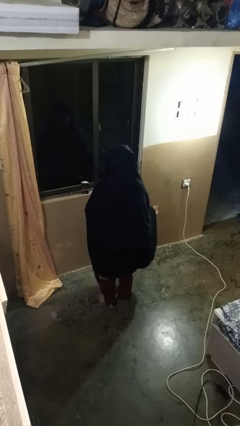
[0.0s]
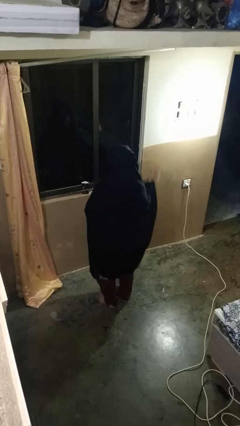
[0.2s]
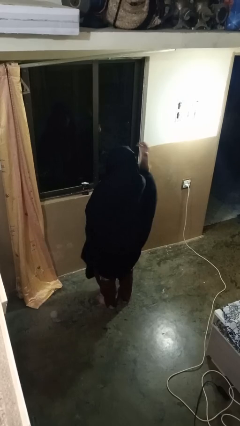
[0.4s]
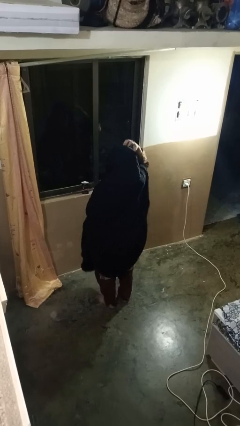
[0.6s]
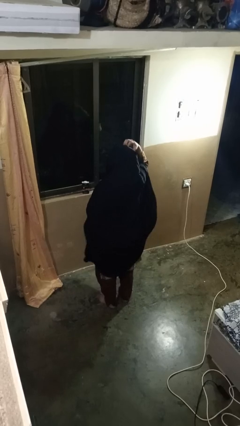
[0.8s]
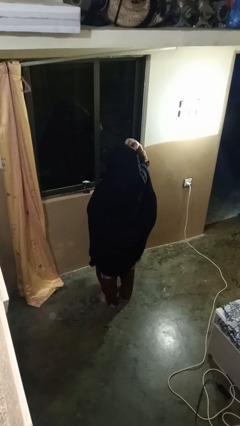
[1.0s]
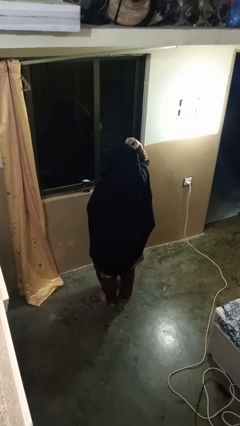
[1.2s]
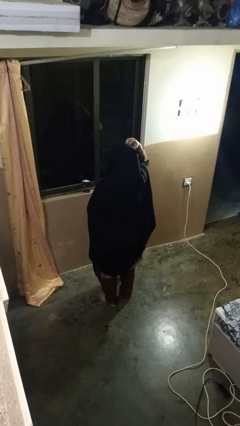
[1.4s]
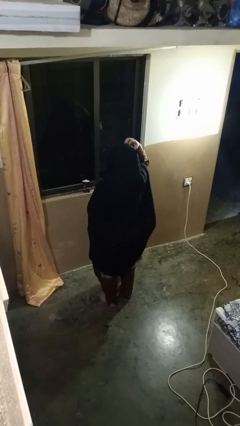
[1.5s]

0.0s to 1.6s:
person scratches face

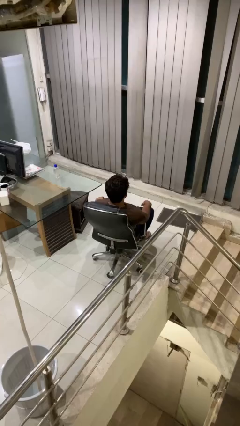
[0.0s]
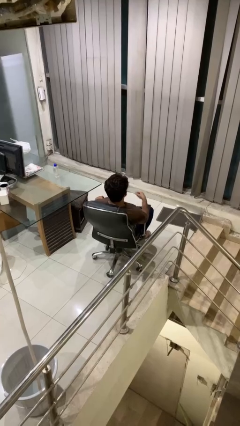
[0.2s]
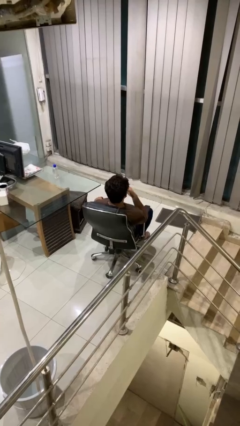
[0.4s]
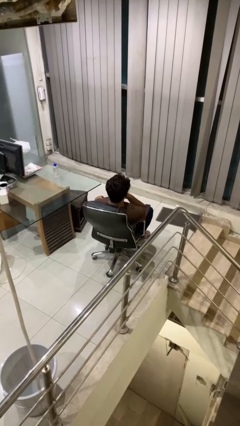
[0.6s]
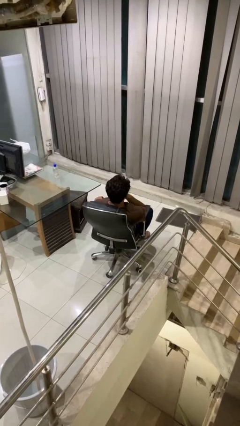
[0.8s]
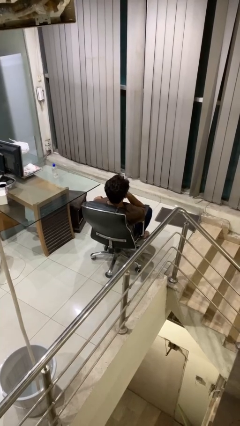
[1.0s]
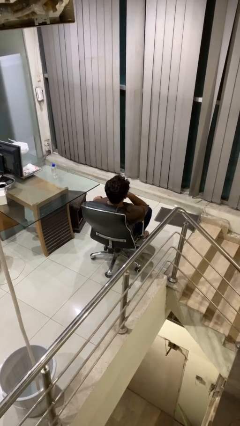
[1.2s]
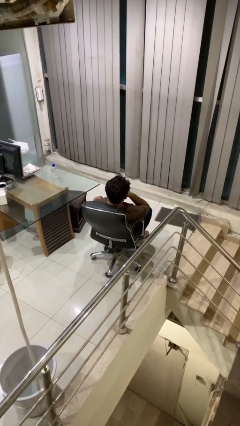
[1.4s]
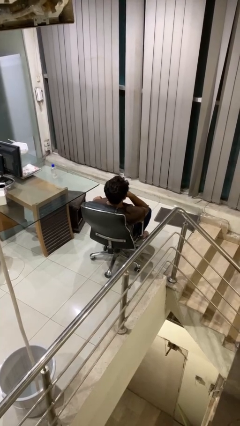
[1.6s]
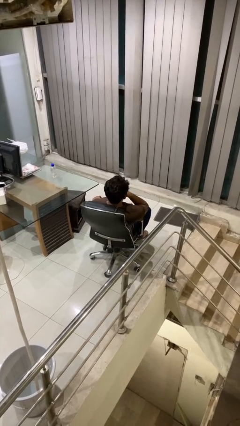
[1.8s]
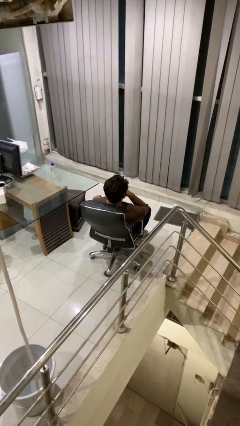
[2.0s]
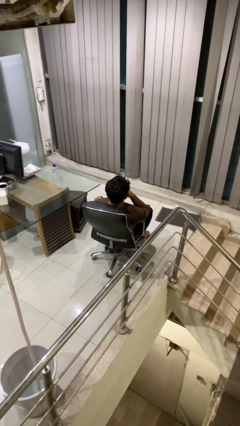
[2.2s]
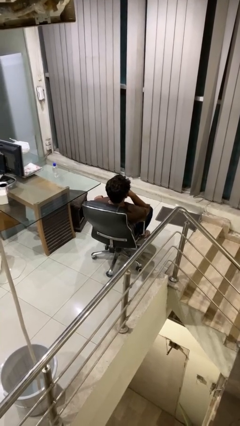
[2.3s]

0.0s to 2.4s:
person strokes chin

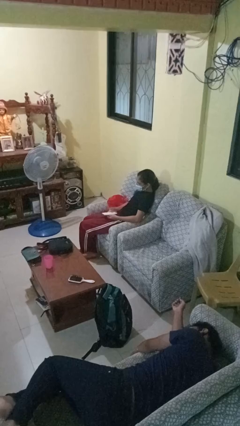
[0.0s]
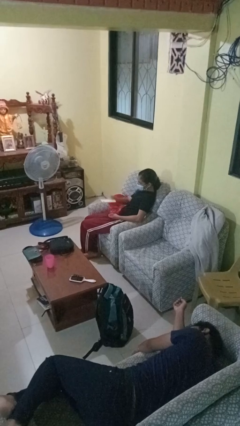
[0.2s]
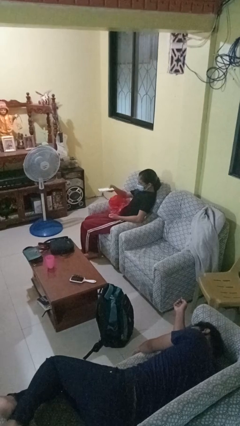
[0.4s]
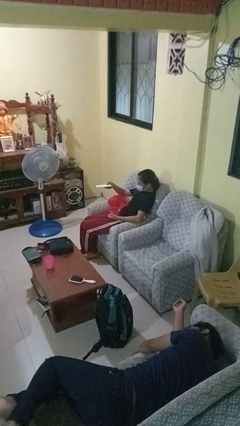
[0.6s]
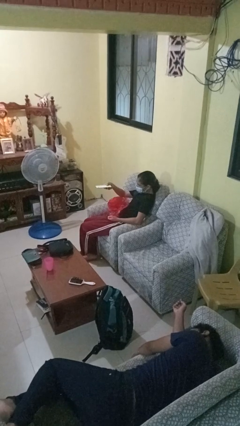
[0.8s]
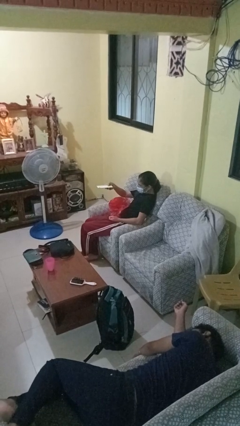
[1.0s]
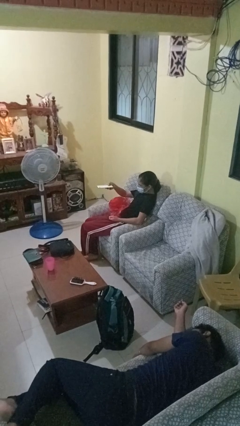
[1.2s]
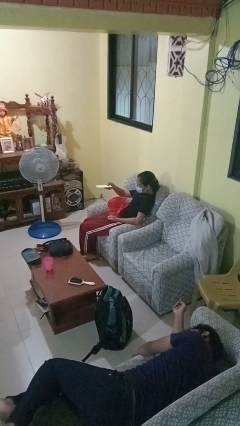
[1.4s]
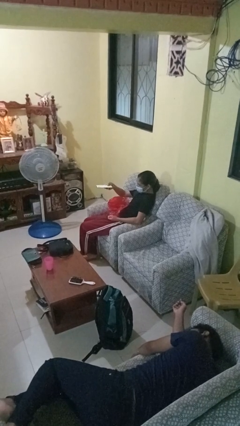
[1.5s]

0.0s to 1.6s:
person uses television remote

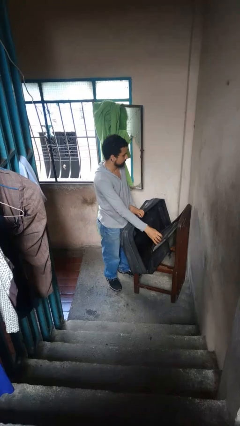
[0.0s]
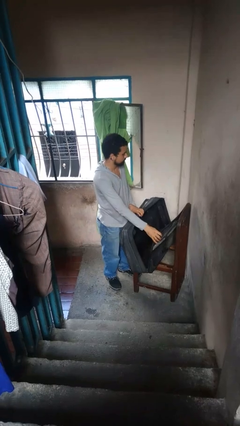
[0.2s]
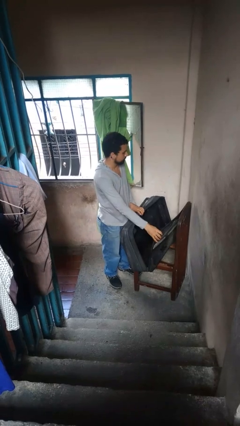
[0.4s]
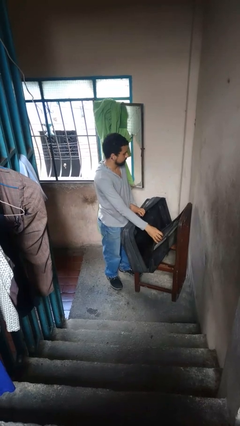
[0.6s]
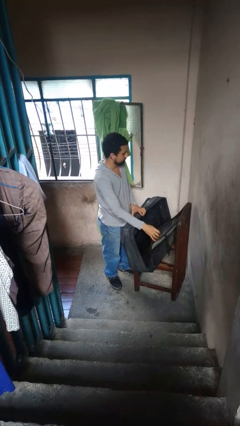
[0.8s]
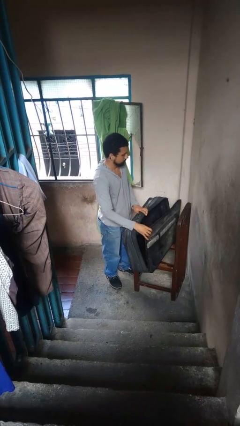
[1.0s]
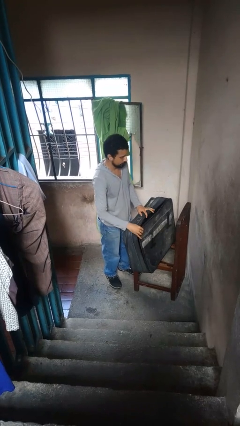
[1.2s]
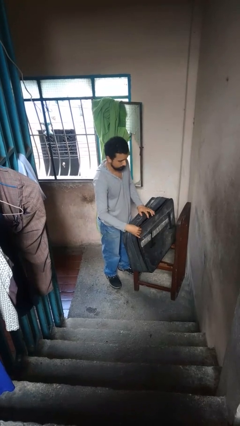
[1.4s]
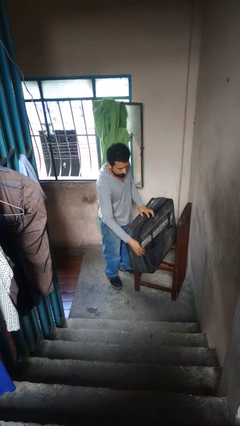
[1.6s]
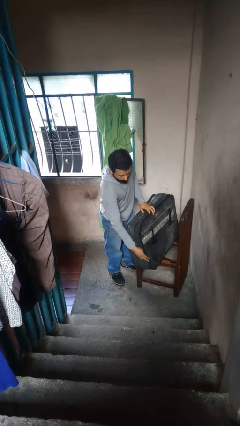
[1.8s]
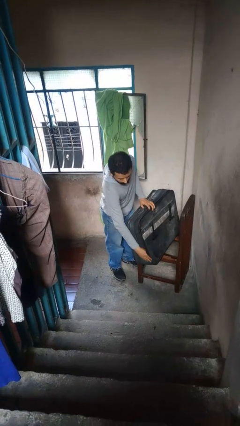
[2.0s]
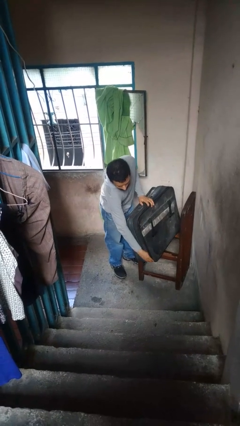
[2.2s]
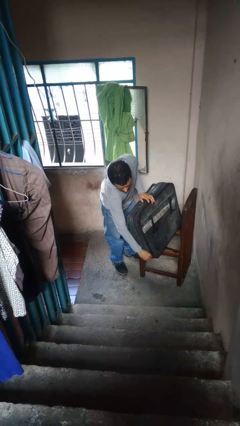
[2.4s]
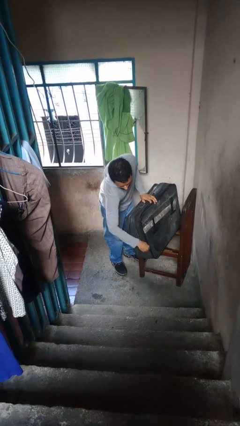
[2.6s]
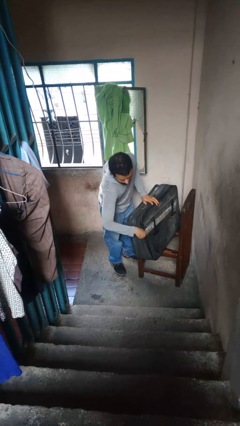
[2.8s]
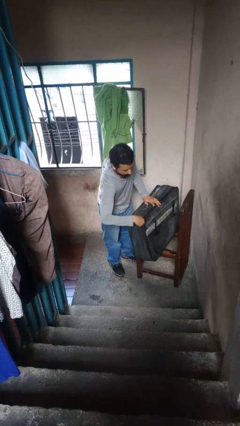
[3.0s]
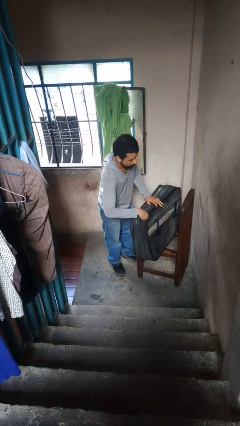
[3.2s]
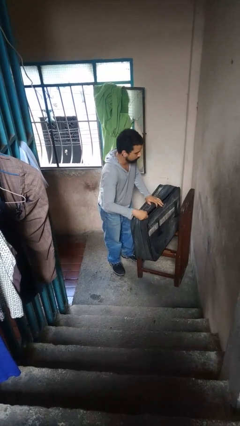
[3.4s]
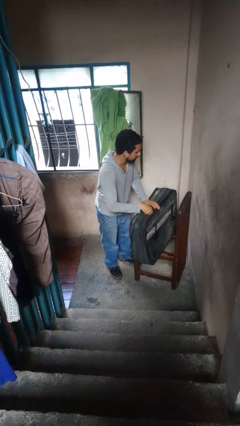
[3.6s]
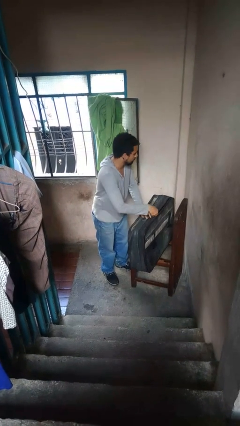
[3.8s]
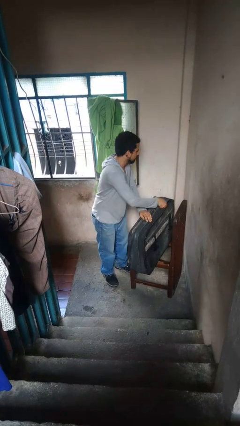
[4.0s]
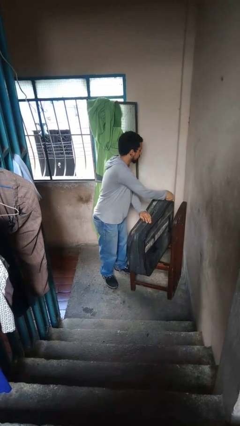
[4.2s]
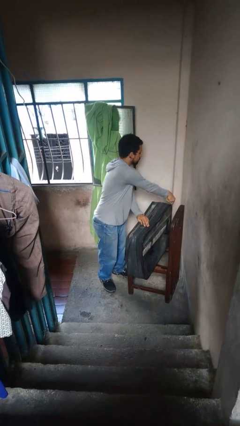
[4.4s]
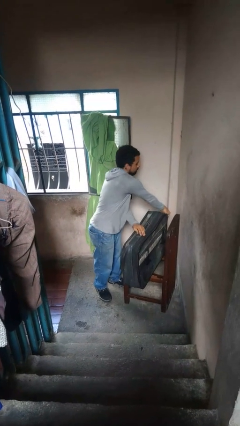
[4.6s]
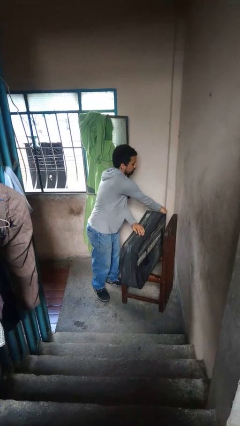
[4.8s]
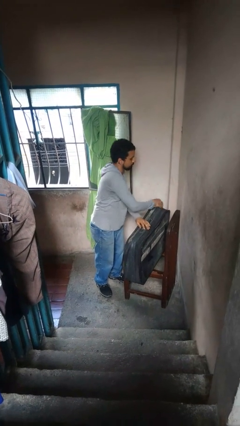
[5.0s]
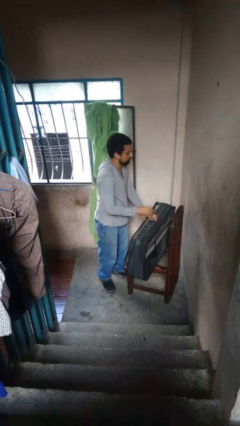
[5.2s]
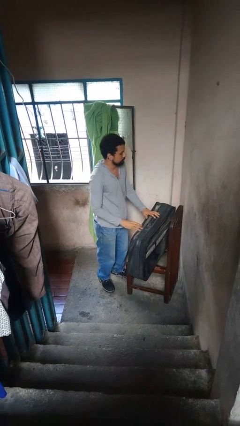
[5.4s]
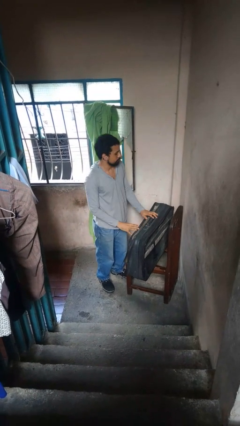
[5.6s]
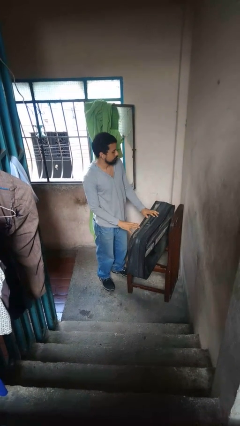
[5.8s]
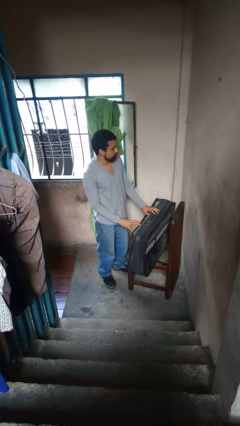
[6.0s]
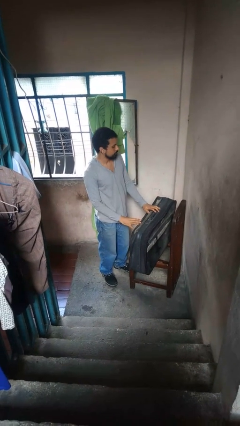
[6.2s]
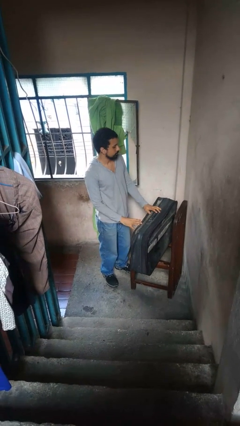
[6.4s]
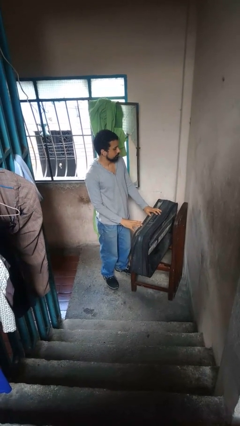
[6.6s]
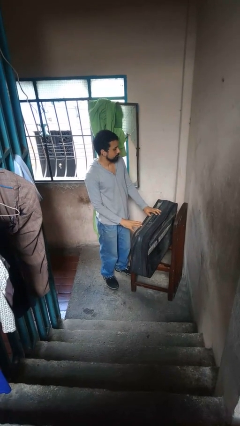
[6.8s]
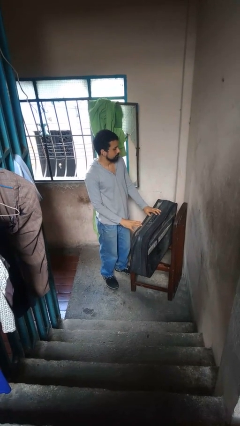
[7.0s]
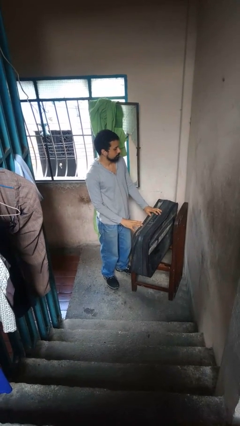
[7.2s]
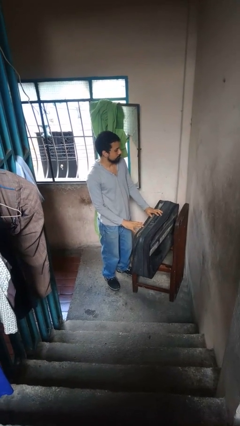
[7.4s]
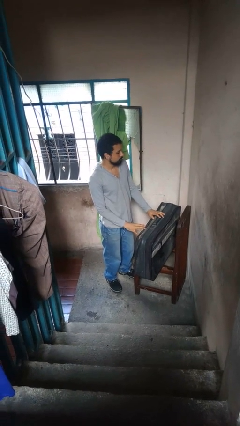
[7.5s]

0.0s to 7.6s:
person closes suitcase

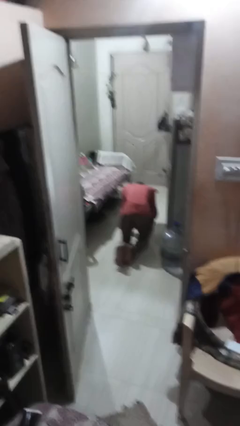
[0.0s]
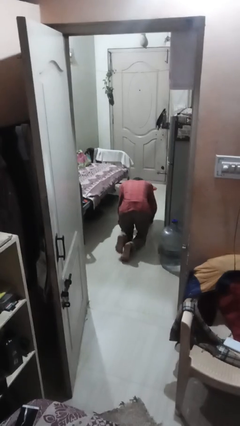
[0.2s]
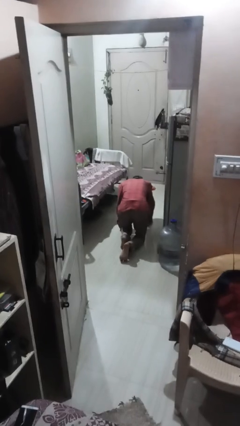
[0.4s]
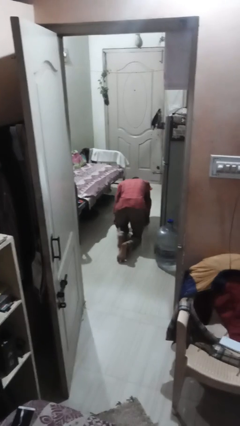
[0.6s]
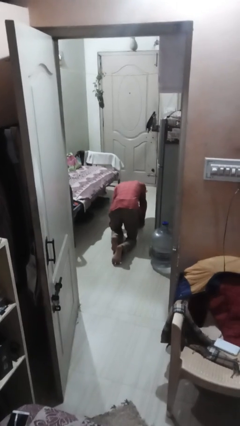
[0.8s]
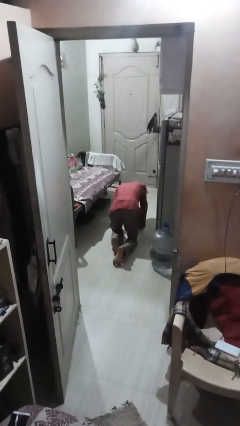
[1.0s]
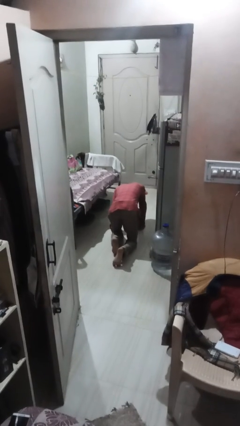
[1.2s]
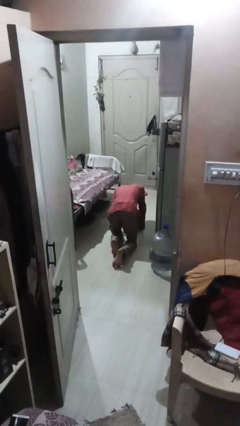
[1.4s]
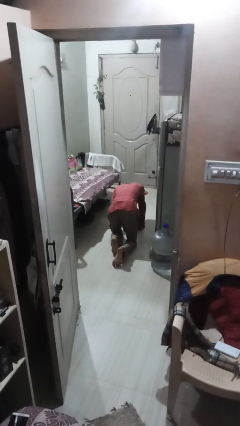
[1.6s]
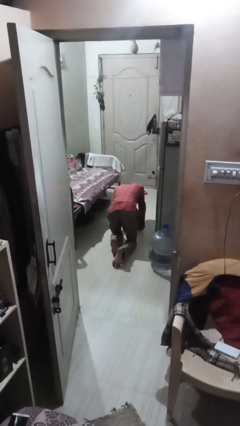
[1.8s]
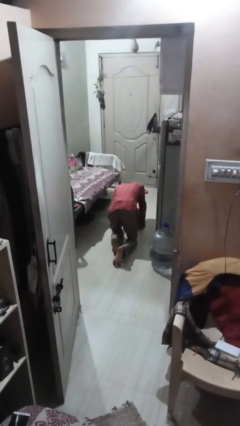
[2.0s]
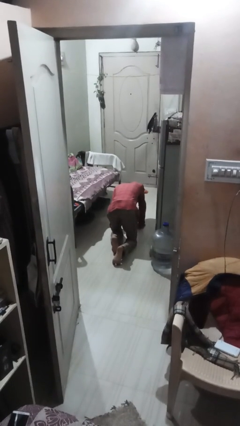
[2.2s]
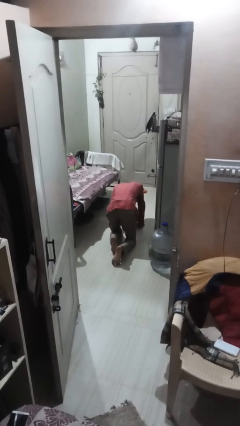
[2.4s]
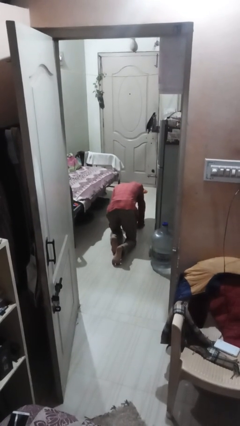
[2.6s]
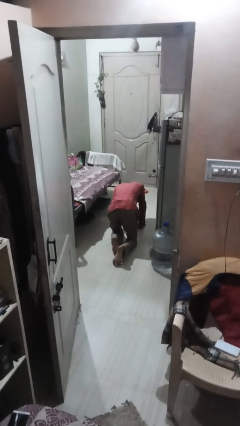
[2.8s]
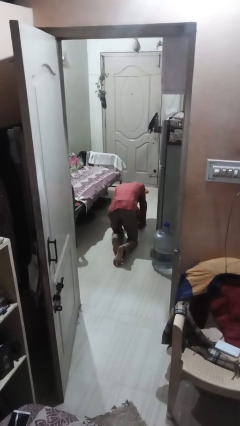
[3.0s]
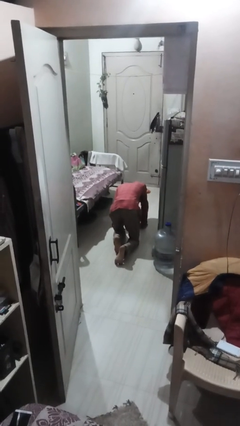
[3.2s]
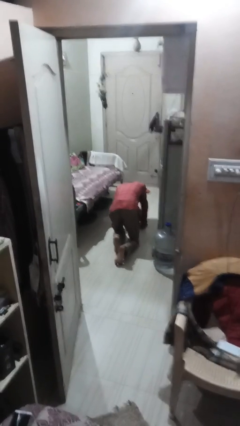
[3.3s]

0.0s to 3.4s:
person crawls

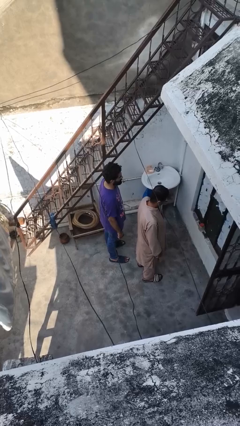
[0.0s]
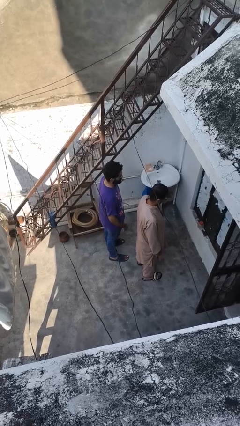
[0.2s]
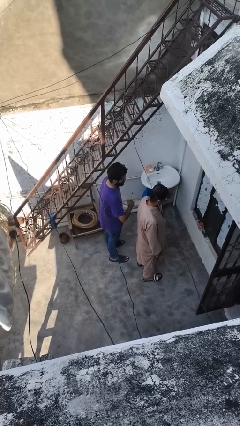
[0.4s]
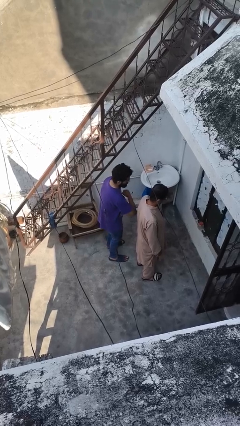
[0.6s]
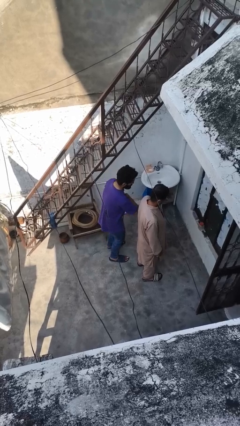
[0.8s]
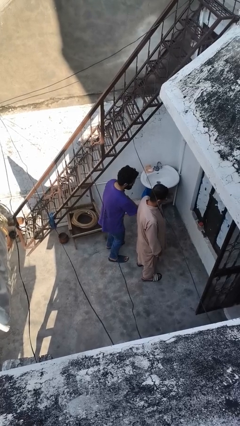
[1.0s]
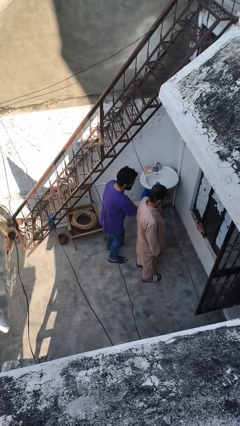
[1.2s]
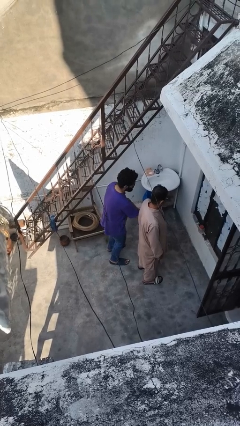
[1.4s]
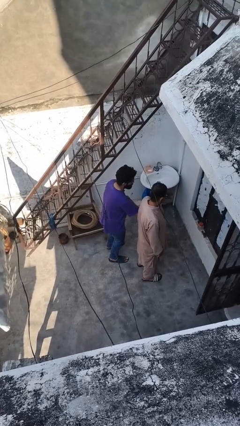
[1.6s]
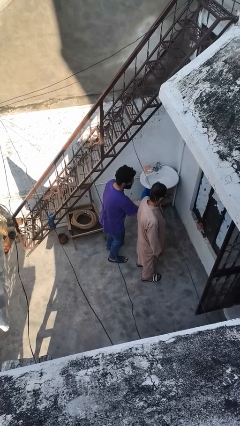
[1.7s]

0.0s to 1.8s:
person nudges person with elbow
